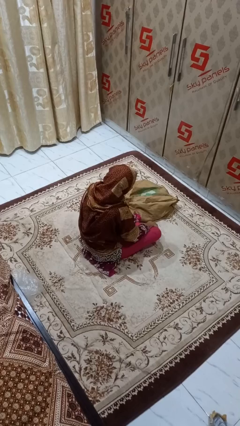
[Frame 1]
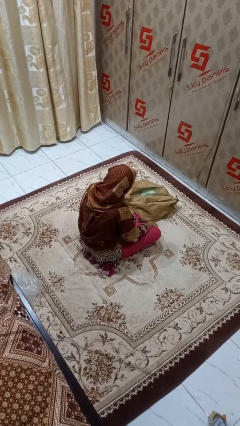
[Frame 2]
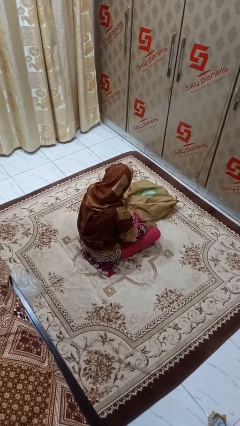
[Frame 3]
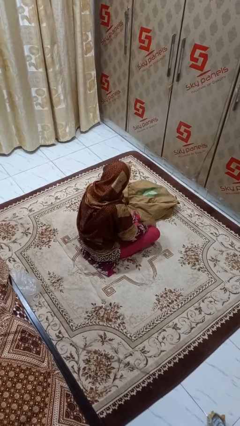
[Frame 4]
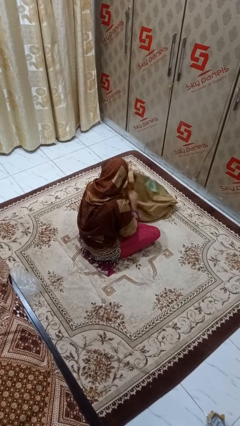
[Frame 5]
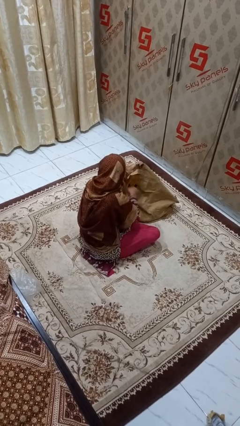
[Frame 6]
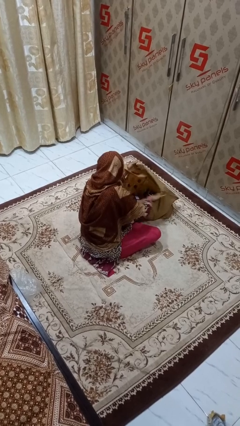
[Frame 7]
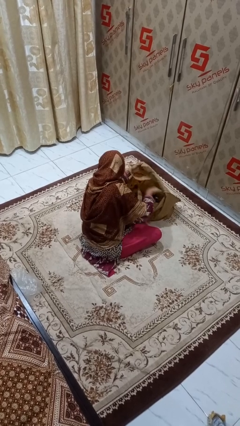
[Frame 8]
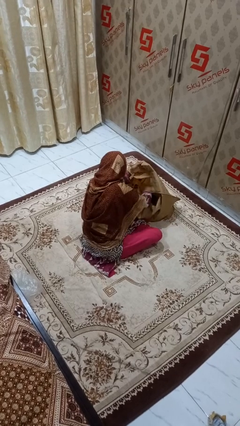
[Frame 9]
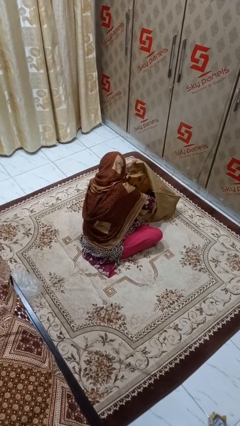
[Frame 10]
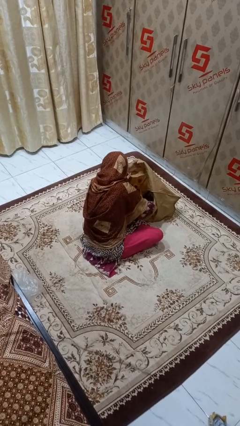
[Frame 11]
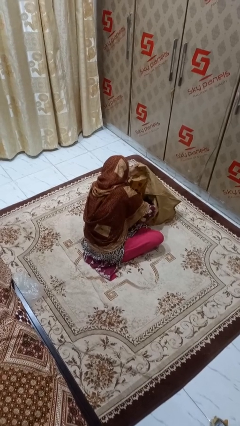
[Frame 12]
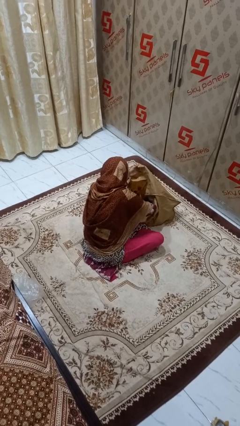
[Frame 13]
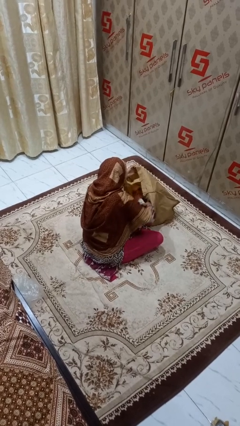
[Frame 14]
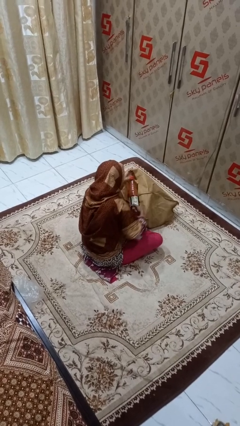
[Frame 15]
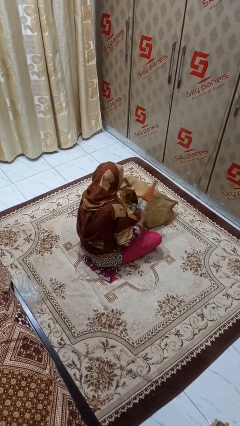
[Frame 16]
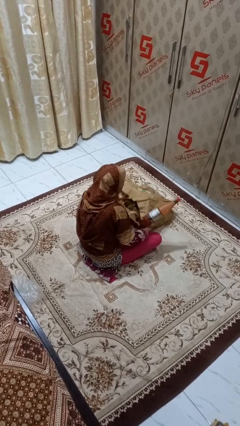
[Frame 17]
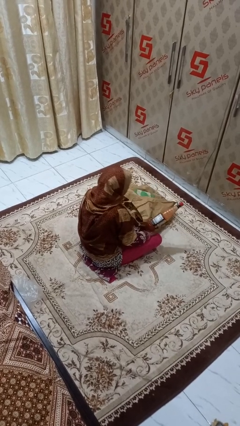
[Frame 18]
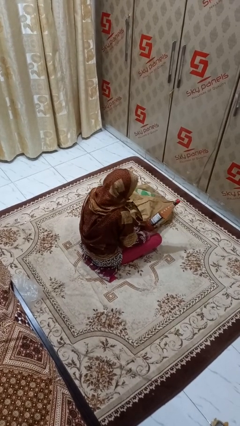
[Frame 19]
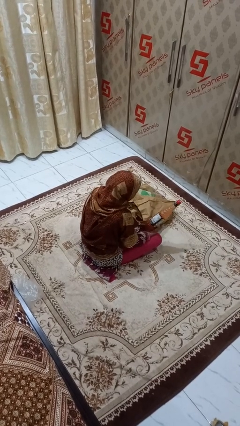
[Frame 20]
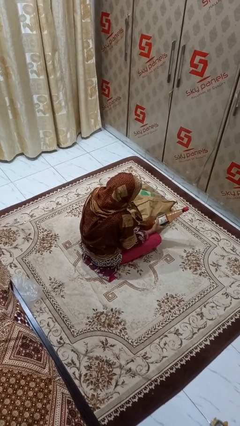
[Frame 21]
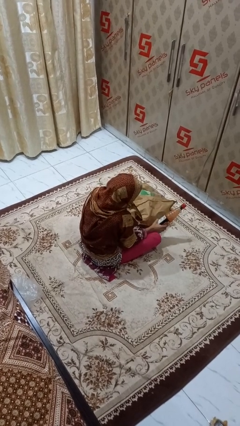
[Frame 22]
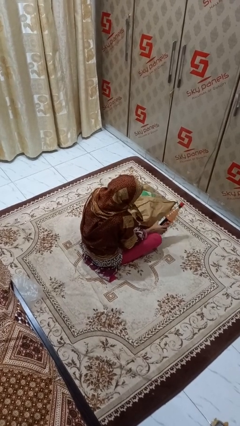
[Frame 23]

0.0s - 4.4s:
person takes object from bag

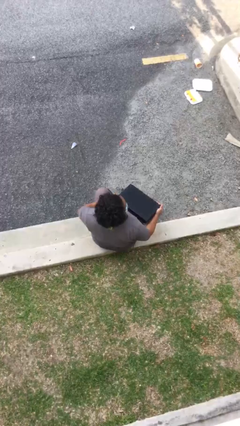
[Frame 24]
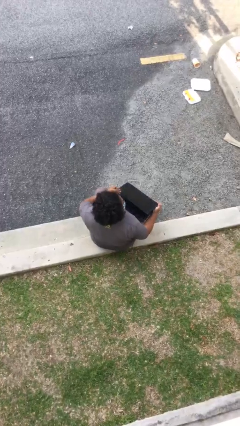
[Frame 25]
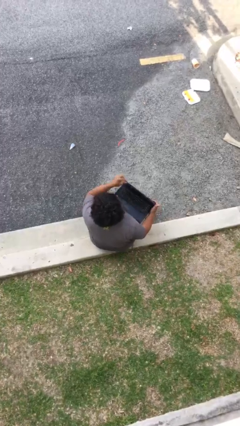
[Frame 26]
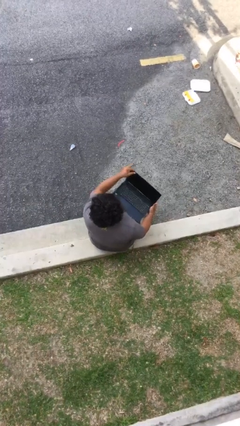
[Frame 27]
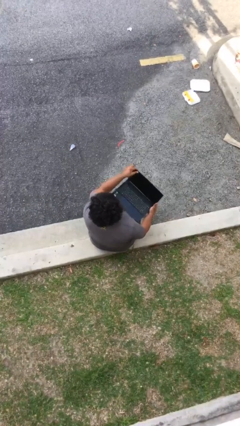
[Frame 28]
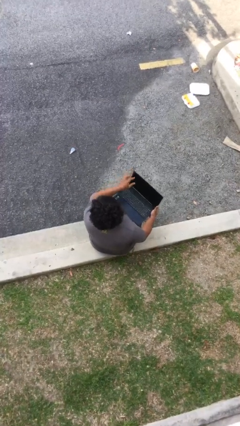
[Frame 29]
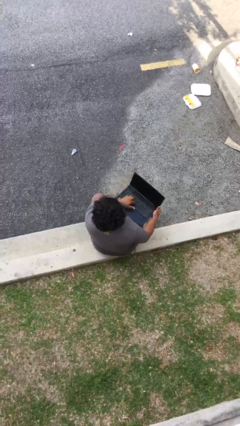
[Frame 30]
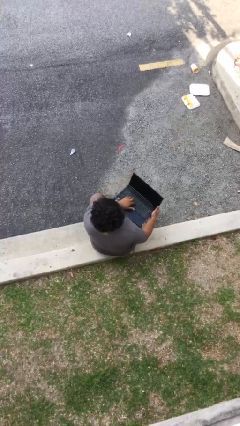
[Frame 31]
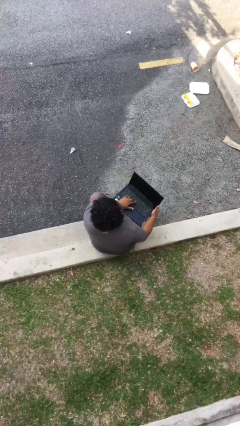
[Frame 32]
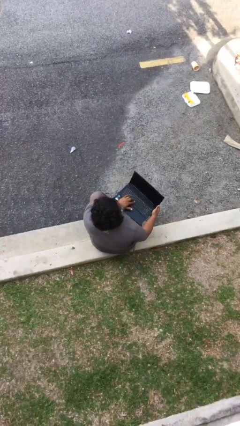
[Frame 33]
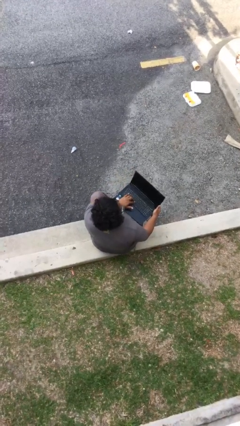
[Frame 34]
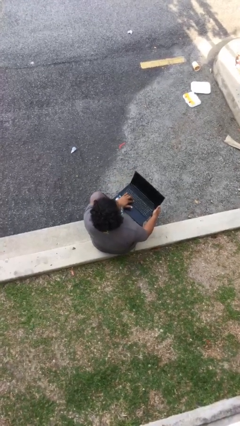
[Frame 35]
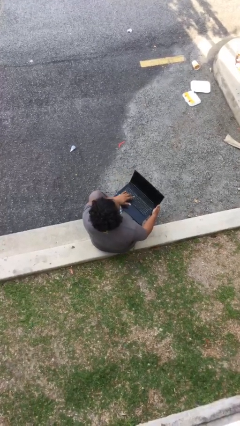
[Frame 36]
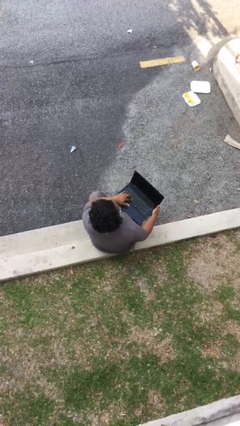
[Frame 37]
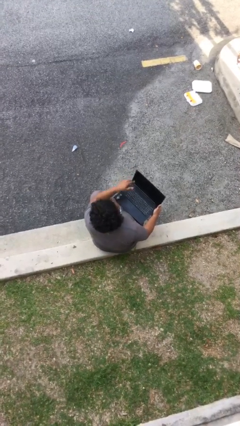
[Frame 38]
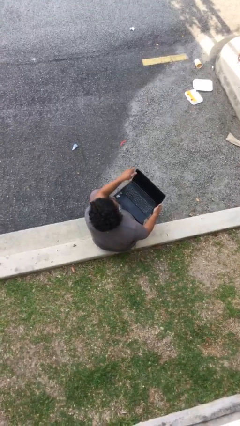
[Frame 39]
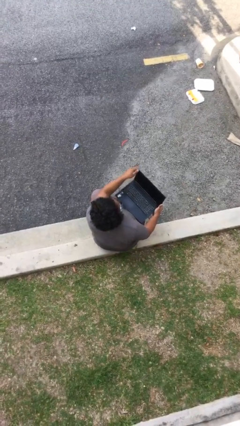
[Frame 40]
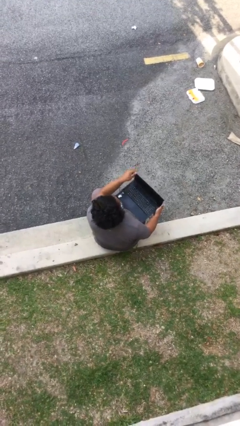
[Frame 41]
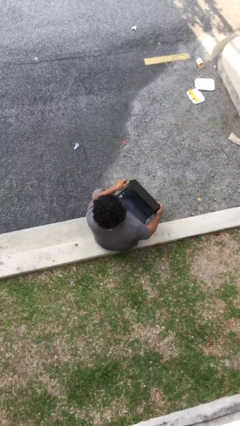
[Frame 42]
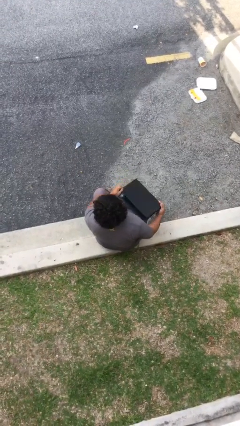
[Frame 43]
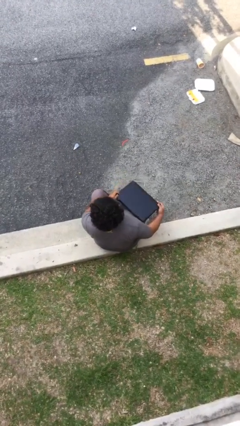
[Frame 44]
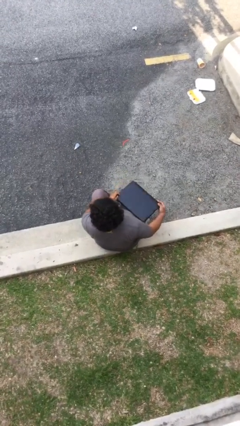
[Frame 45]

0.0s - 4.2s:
person interacts with laptop

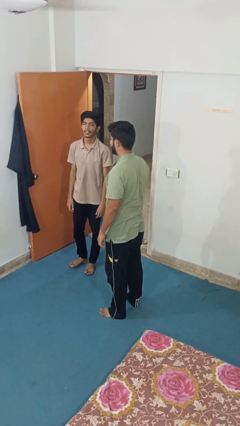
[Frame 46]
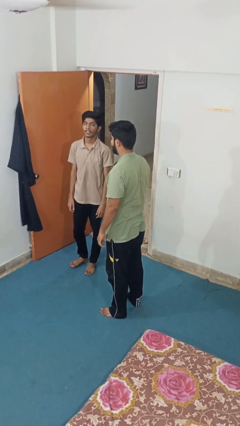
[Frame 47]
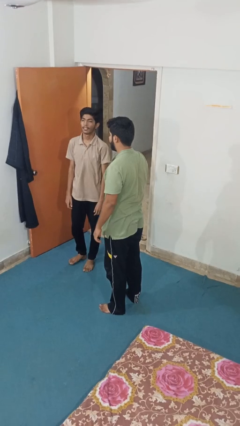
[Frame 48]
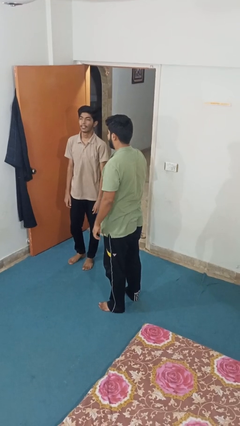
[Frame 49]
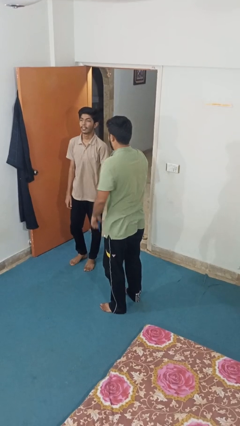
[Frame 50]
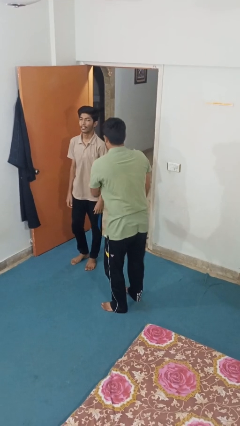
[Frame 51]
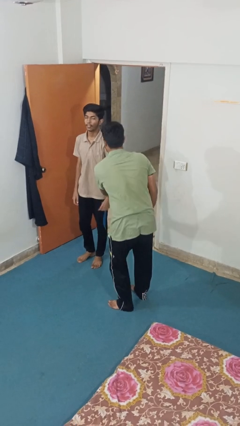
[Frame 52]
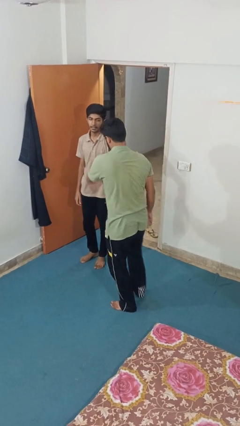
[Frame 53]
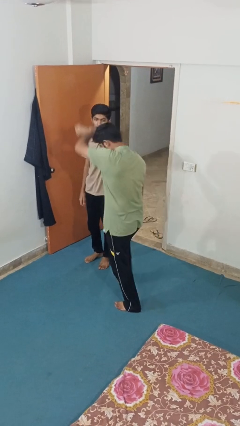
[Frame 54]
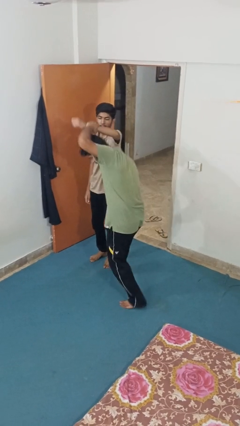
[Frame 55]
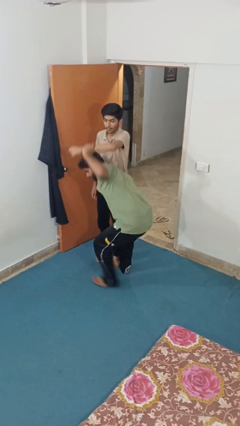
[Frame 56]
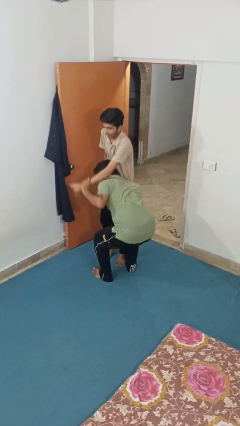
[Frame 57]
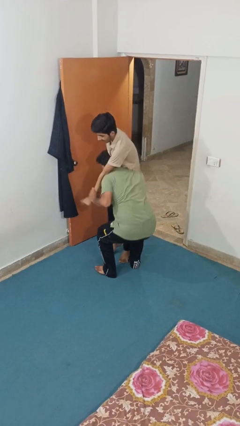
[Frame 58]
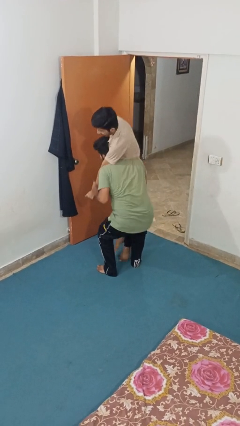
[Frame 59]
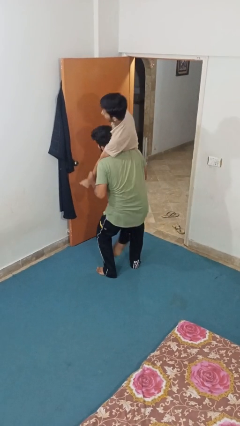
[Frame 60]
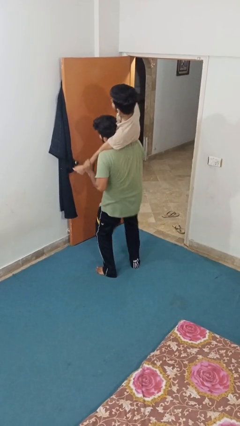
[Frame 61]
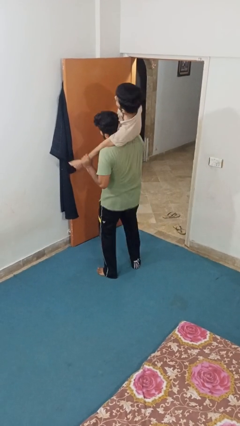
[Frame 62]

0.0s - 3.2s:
person carries person over shoulder

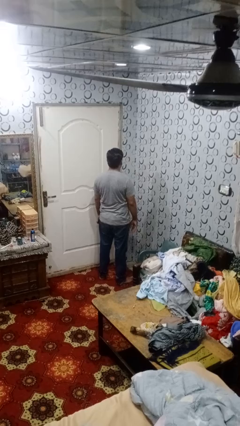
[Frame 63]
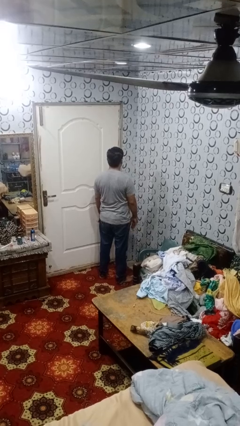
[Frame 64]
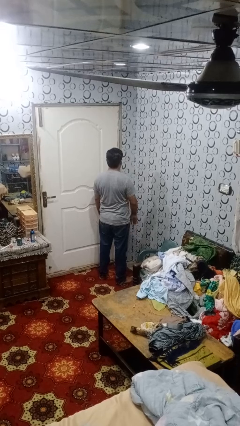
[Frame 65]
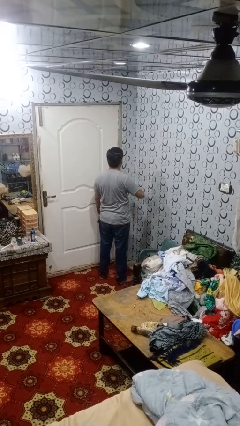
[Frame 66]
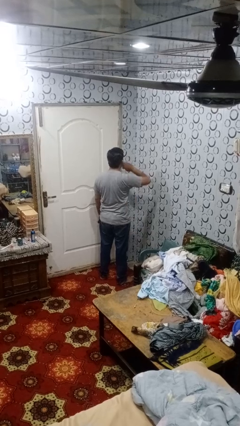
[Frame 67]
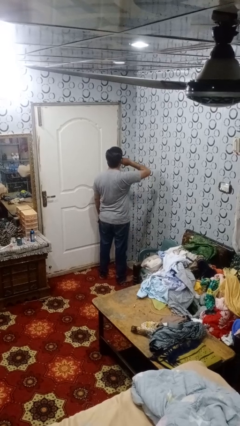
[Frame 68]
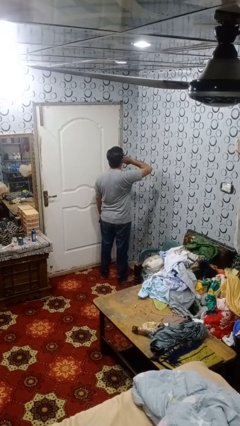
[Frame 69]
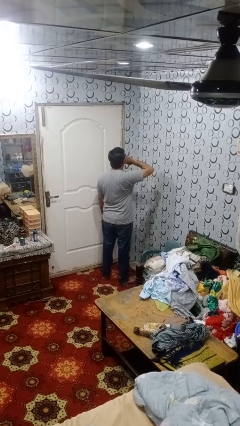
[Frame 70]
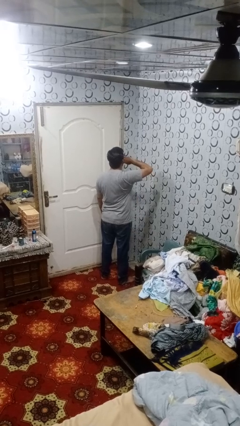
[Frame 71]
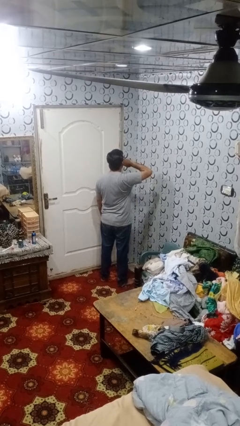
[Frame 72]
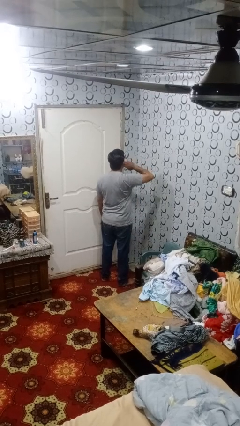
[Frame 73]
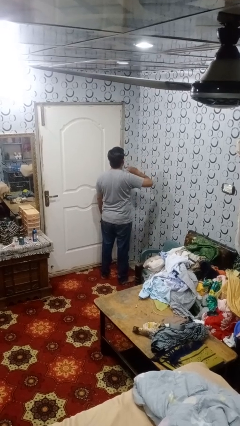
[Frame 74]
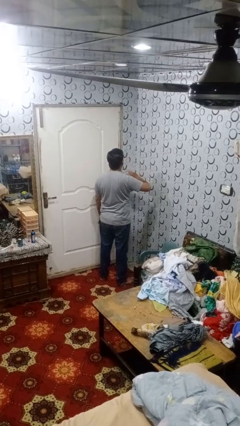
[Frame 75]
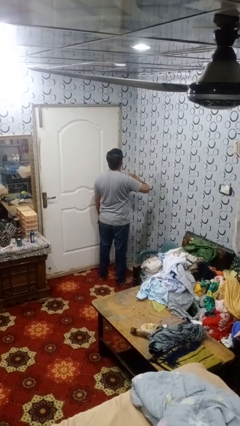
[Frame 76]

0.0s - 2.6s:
person yawns

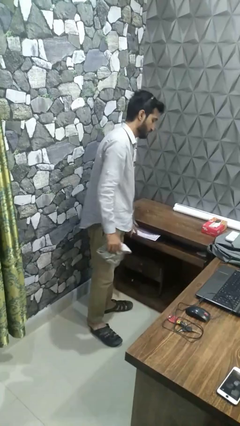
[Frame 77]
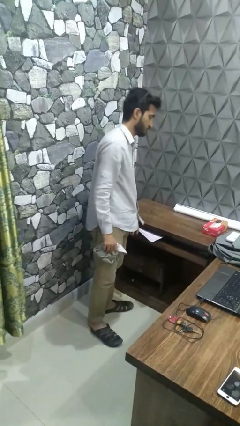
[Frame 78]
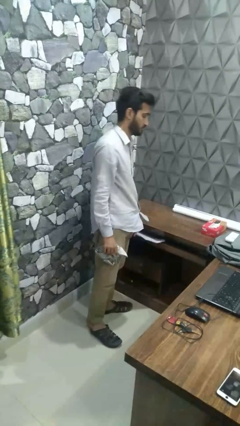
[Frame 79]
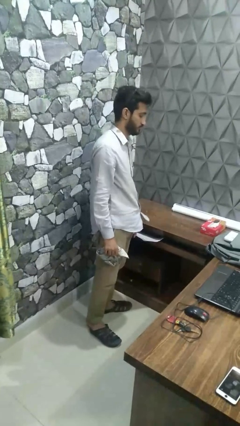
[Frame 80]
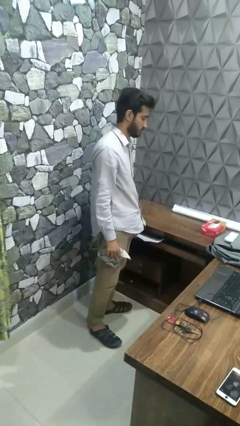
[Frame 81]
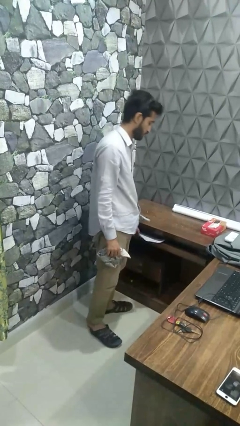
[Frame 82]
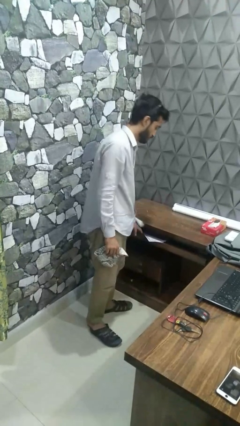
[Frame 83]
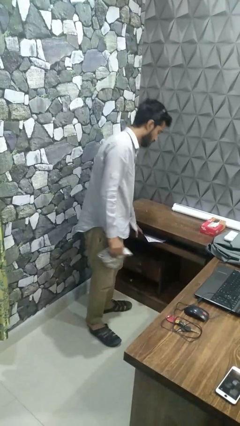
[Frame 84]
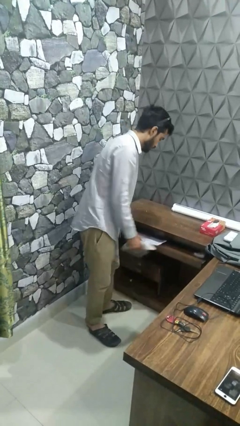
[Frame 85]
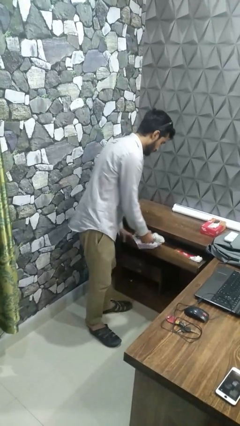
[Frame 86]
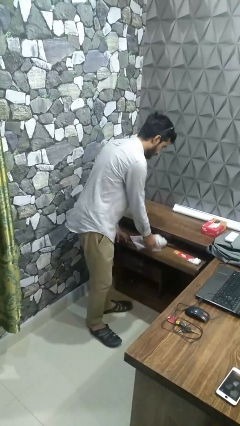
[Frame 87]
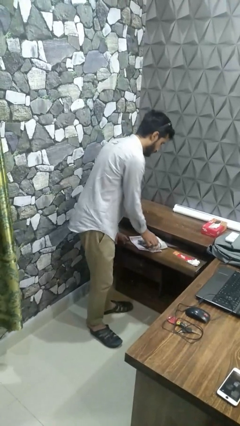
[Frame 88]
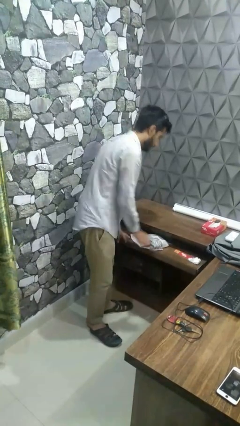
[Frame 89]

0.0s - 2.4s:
person puts clothes into dresser

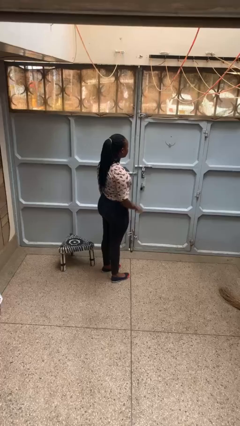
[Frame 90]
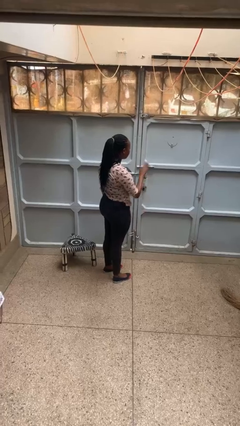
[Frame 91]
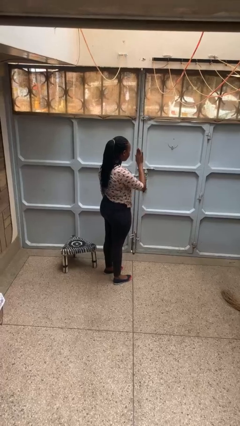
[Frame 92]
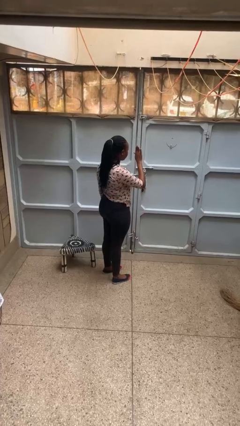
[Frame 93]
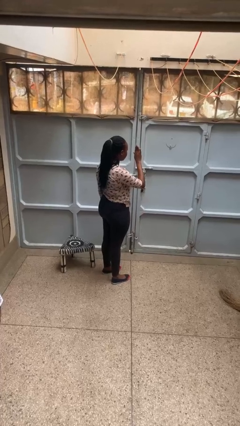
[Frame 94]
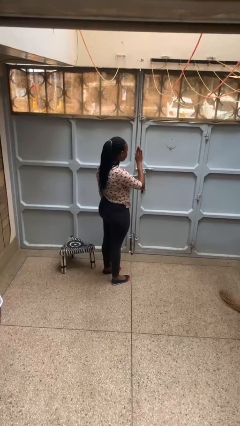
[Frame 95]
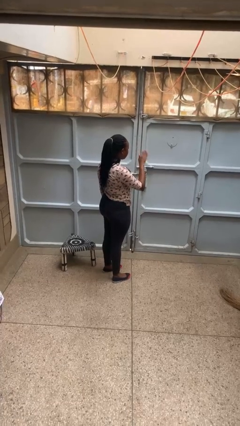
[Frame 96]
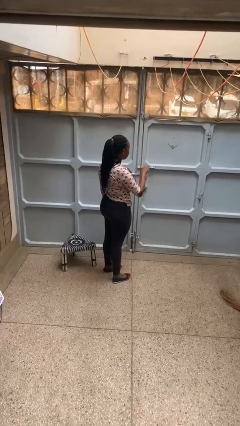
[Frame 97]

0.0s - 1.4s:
person gestures stop
